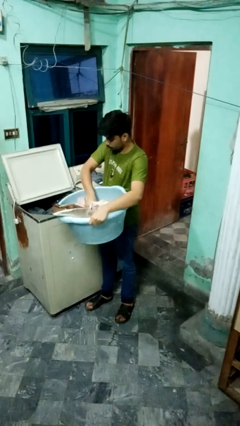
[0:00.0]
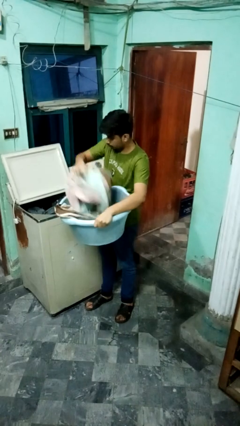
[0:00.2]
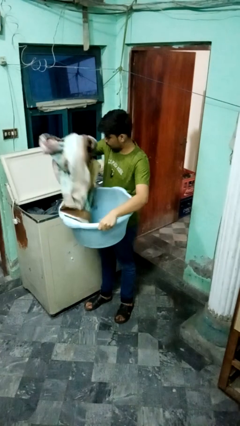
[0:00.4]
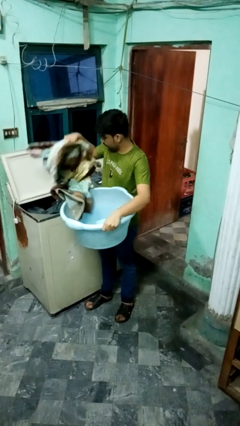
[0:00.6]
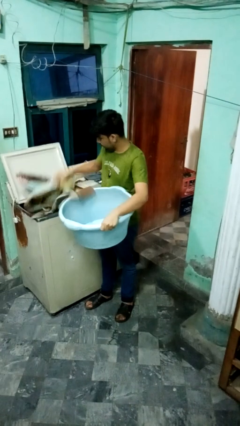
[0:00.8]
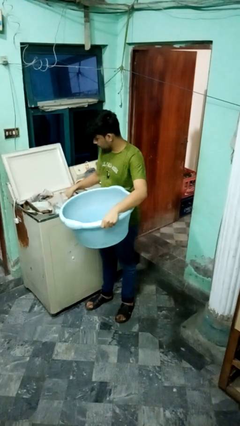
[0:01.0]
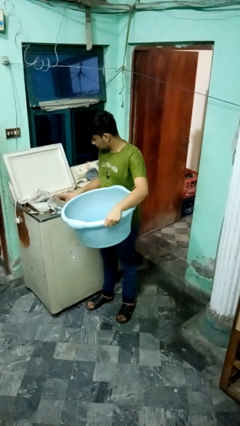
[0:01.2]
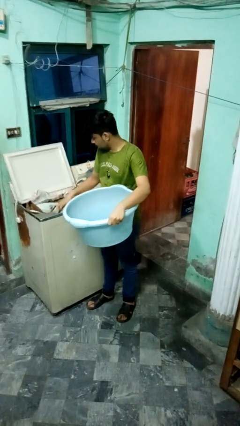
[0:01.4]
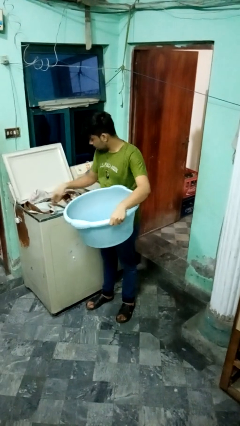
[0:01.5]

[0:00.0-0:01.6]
person loads clotheswasher

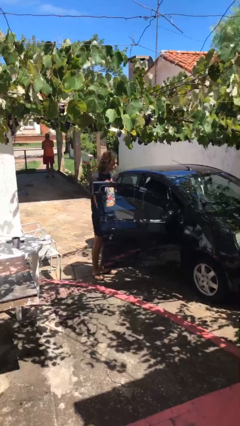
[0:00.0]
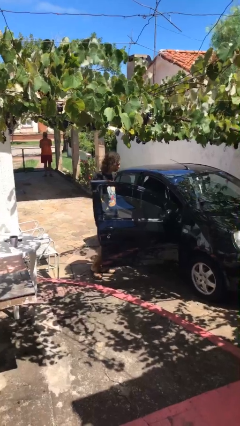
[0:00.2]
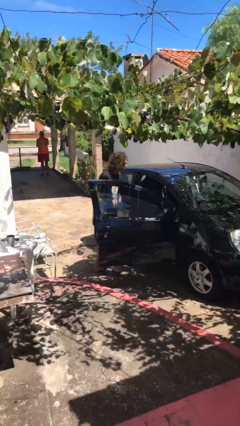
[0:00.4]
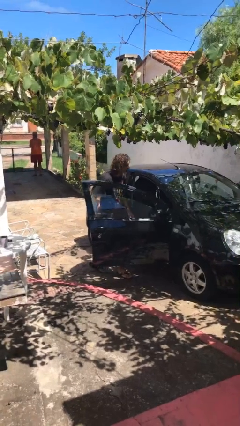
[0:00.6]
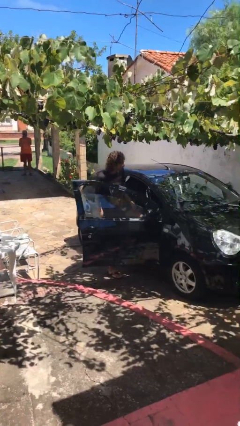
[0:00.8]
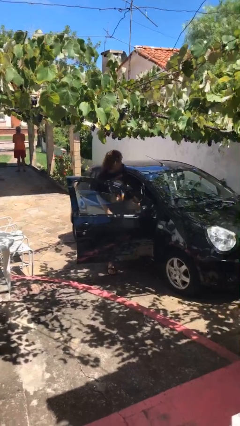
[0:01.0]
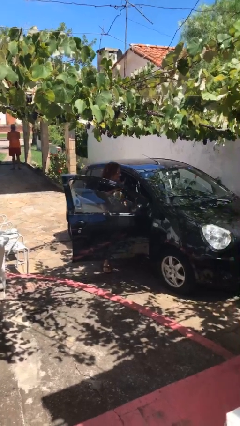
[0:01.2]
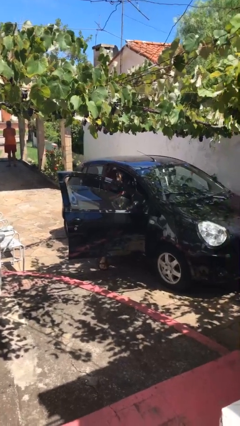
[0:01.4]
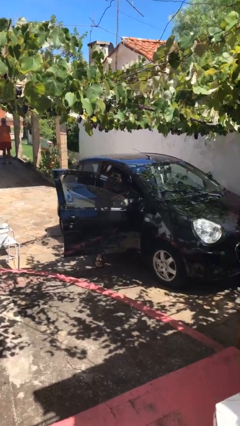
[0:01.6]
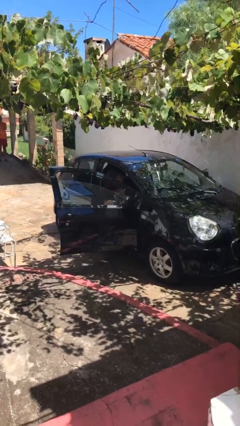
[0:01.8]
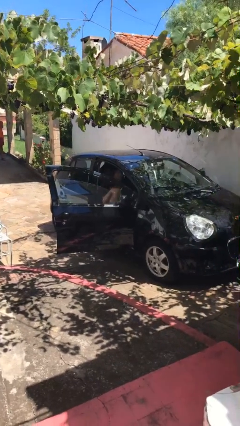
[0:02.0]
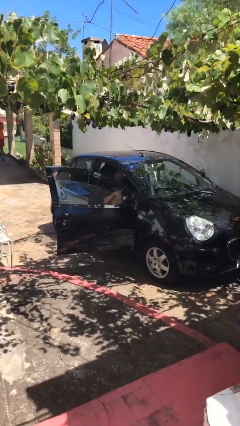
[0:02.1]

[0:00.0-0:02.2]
person enters car

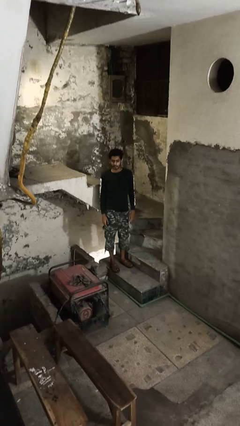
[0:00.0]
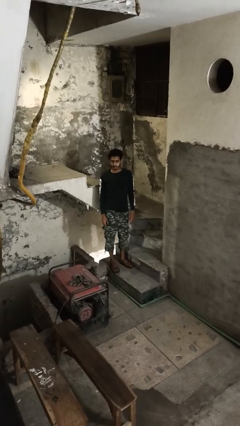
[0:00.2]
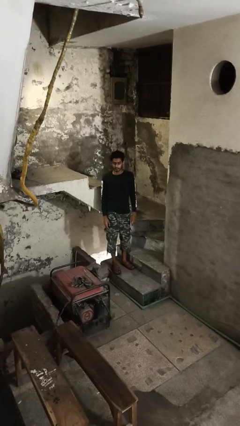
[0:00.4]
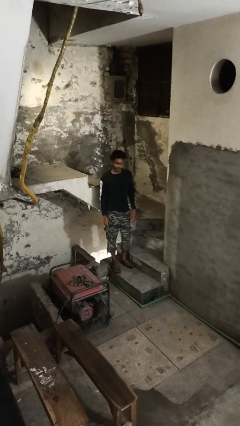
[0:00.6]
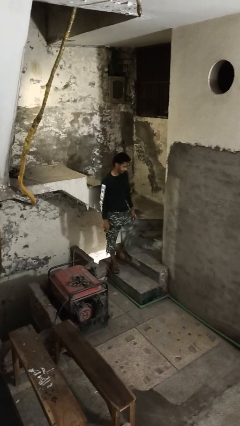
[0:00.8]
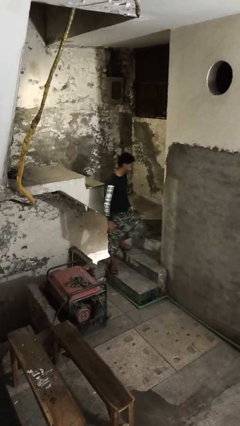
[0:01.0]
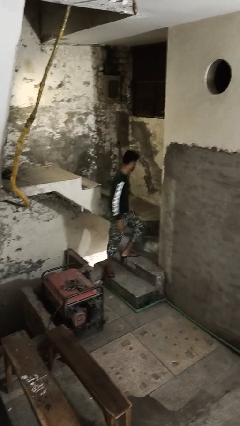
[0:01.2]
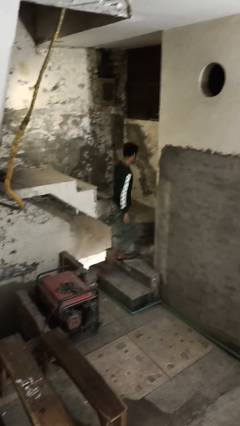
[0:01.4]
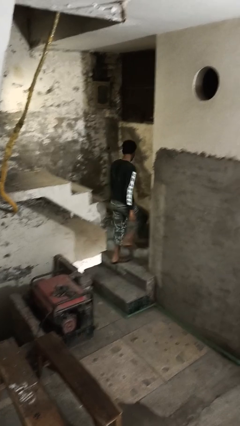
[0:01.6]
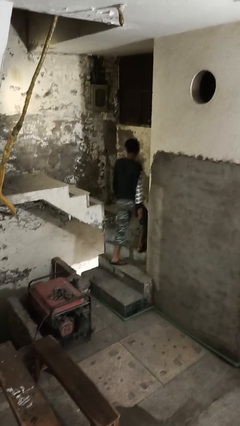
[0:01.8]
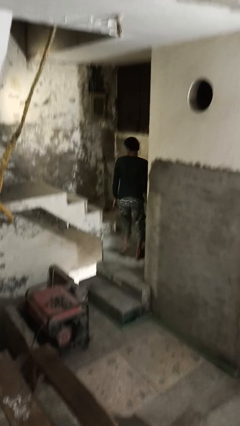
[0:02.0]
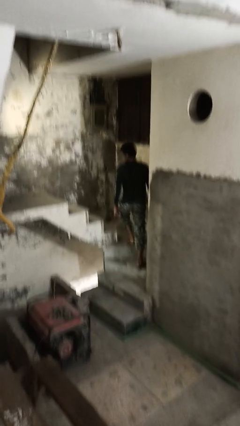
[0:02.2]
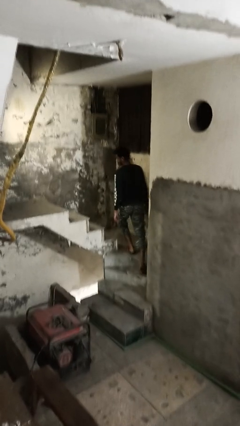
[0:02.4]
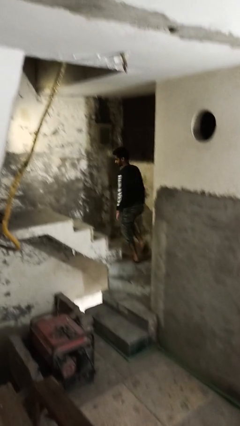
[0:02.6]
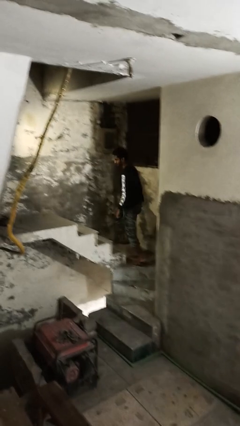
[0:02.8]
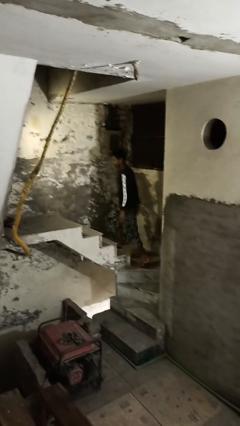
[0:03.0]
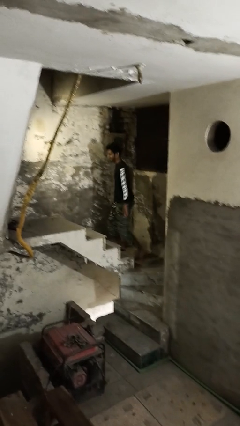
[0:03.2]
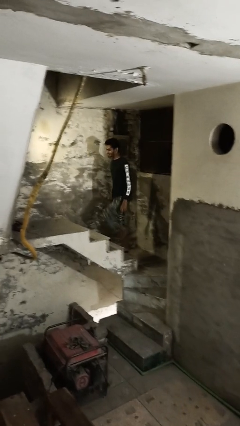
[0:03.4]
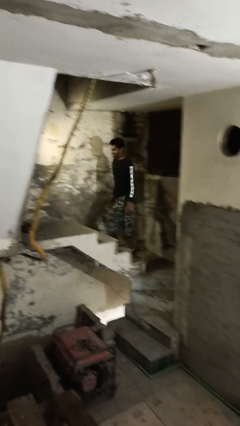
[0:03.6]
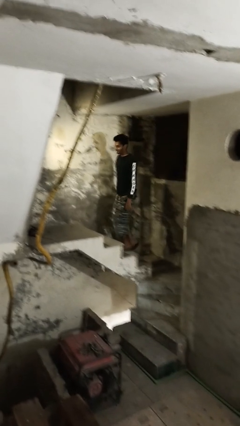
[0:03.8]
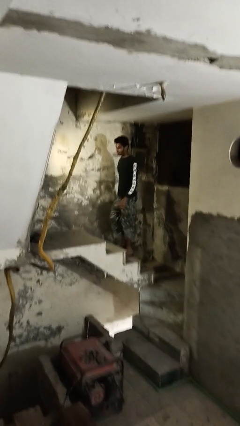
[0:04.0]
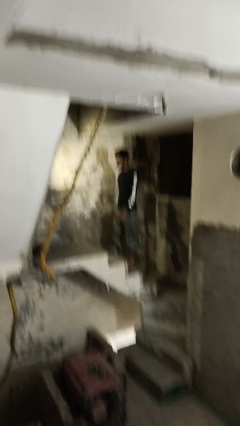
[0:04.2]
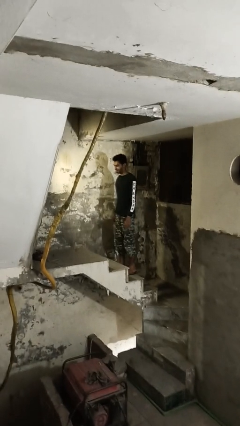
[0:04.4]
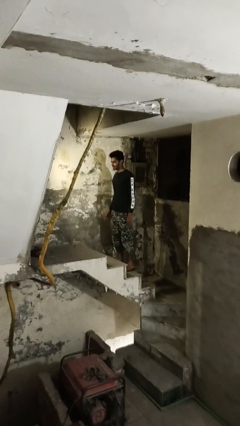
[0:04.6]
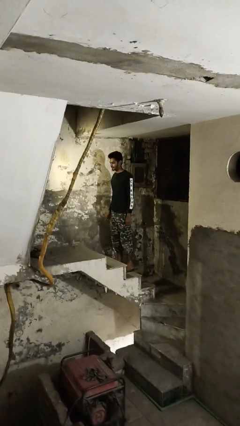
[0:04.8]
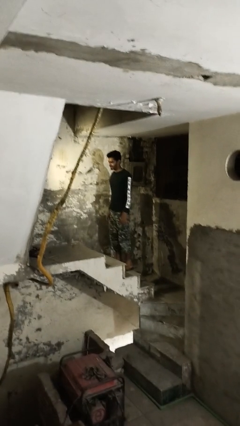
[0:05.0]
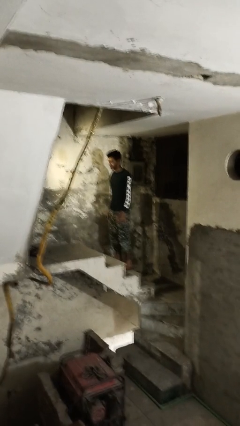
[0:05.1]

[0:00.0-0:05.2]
person climbs up stairs

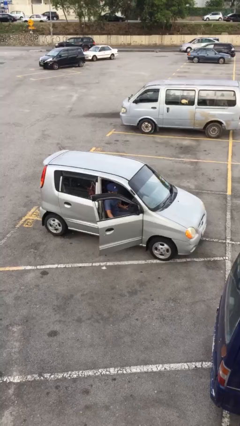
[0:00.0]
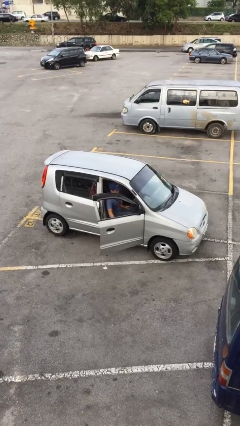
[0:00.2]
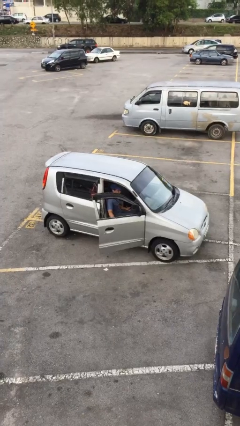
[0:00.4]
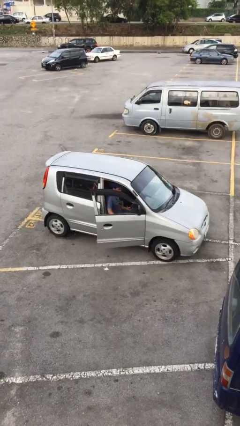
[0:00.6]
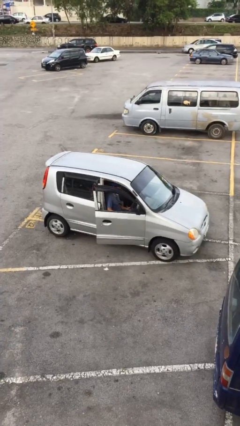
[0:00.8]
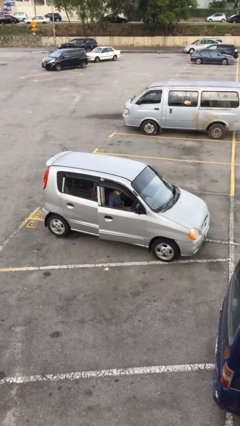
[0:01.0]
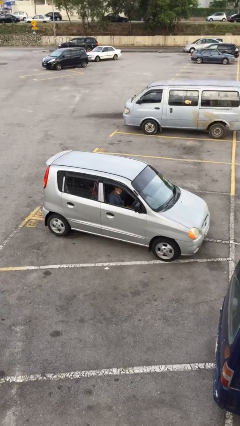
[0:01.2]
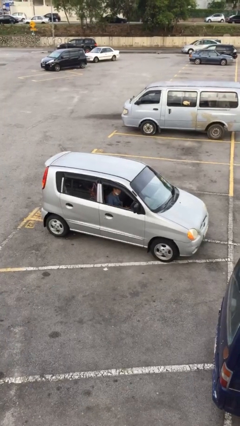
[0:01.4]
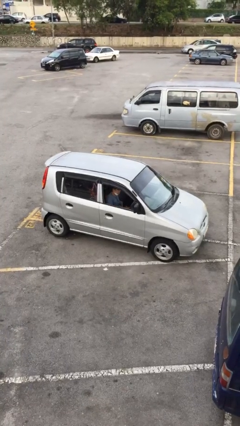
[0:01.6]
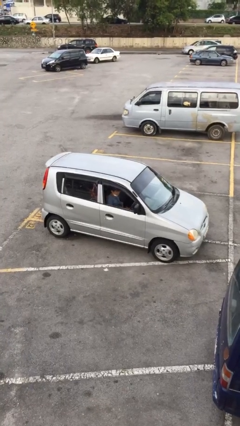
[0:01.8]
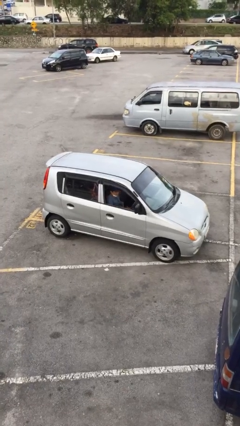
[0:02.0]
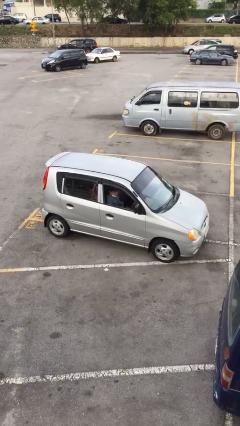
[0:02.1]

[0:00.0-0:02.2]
person closes car door

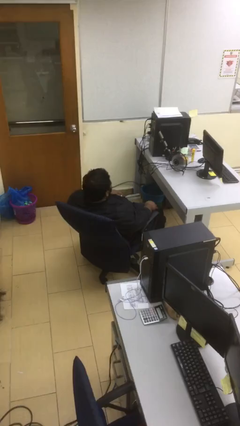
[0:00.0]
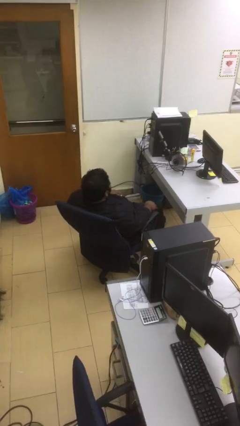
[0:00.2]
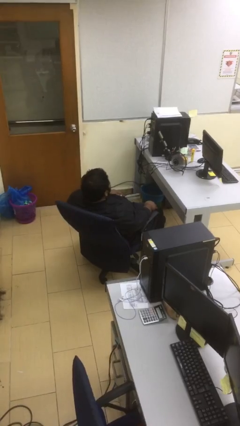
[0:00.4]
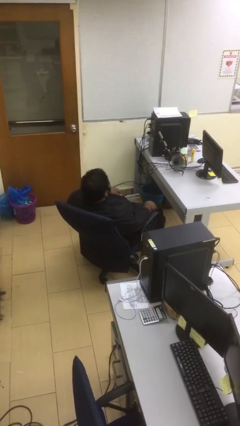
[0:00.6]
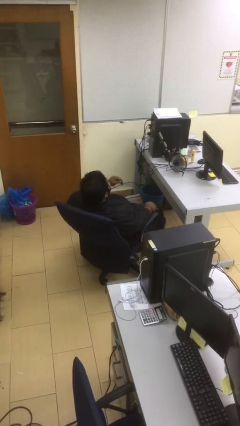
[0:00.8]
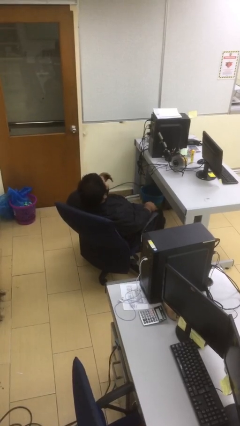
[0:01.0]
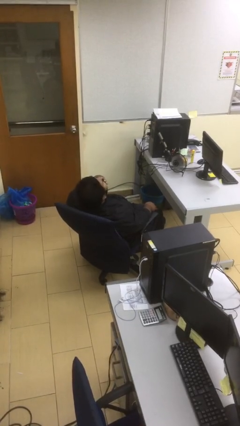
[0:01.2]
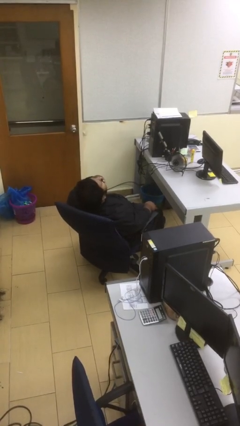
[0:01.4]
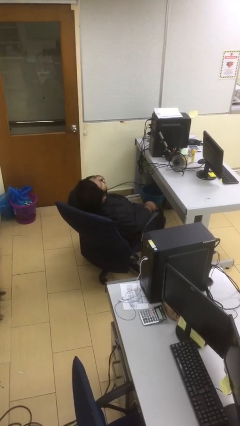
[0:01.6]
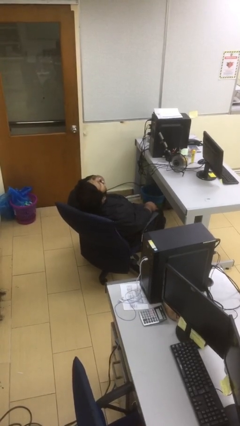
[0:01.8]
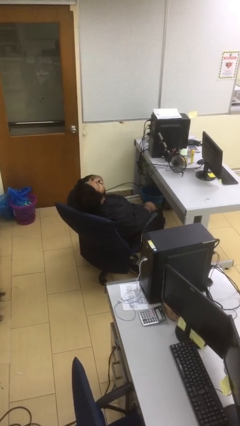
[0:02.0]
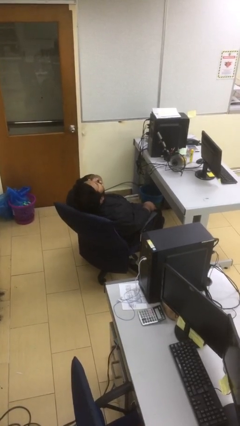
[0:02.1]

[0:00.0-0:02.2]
person yawns

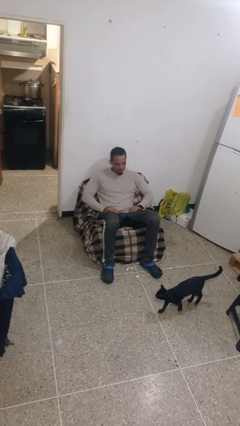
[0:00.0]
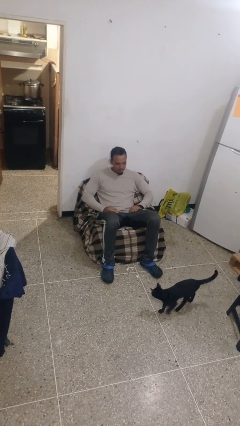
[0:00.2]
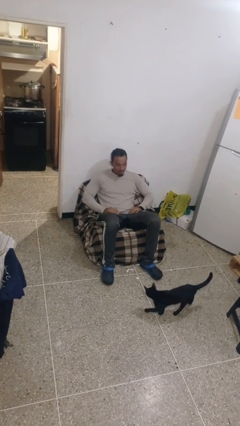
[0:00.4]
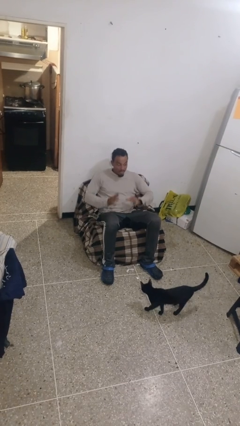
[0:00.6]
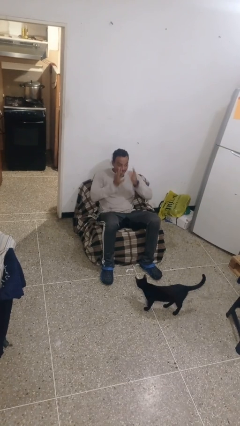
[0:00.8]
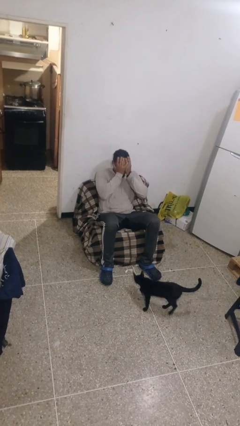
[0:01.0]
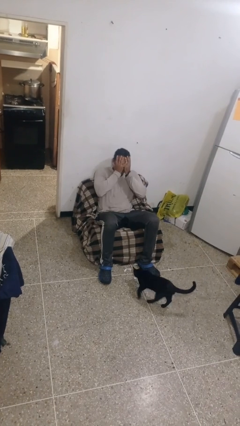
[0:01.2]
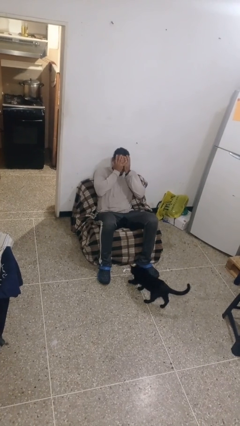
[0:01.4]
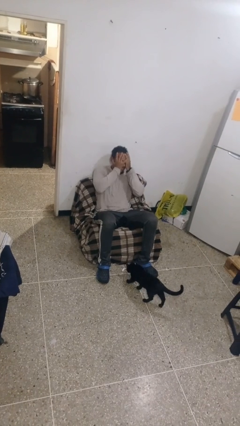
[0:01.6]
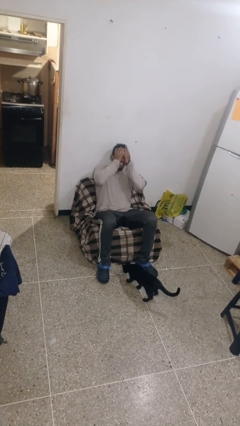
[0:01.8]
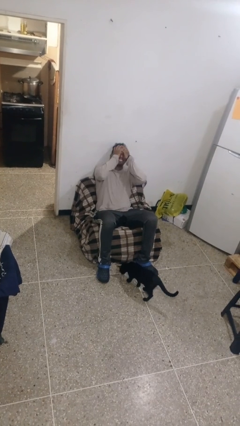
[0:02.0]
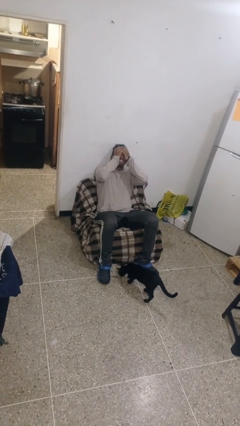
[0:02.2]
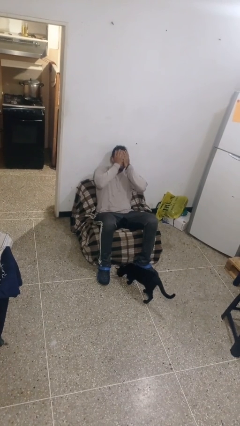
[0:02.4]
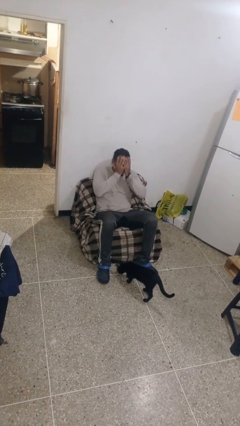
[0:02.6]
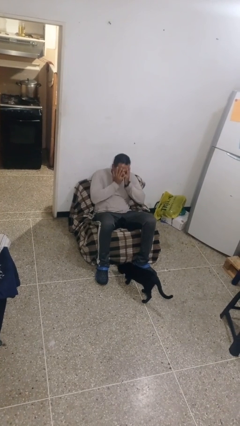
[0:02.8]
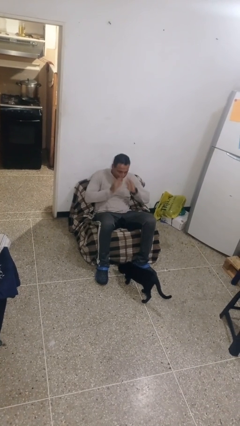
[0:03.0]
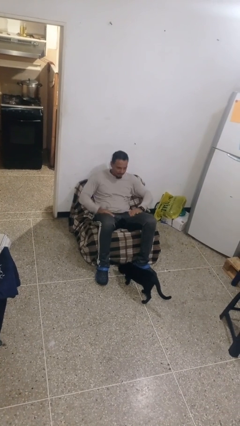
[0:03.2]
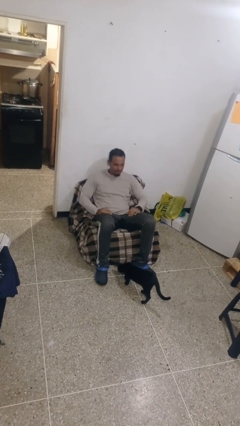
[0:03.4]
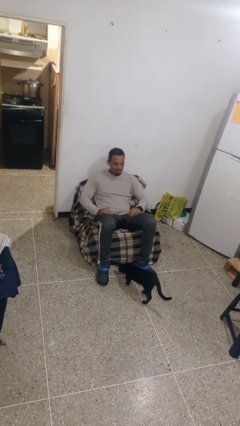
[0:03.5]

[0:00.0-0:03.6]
person covers face with hands

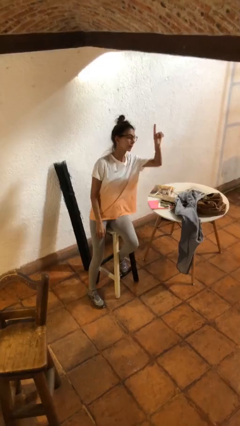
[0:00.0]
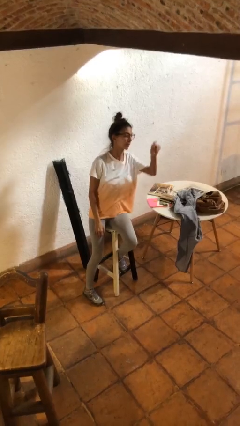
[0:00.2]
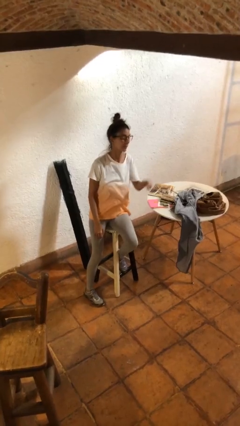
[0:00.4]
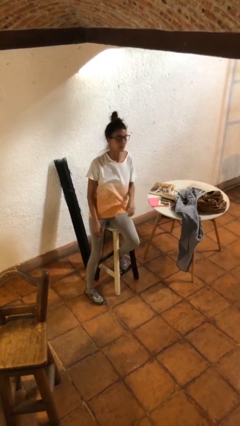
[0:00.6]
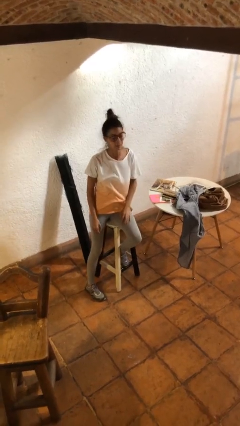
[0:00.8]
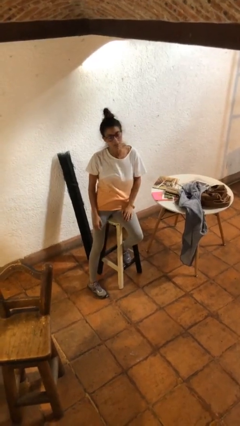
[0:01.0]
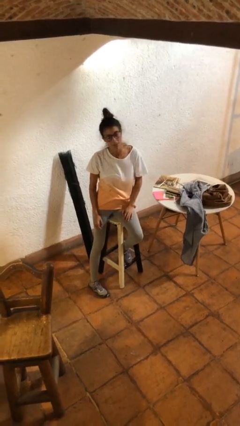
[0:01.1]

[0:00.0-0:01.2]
person gestures lower hand
